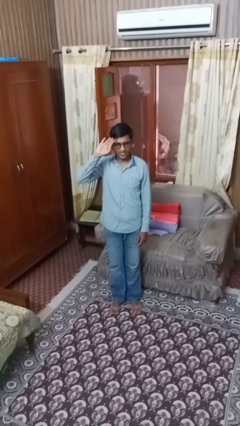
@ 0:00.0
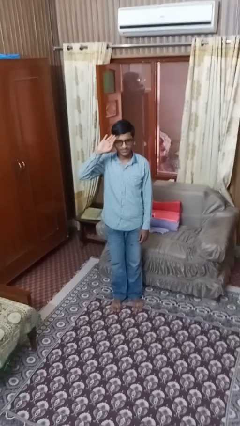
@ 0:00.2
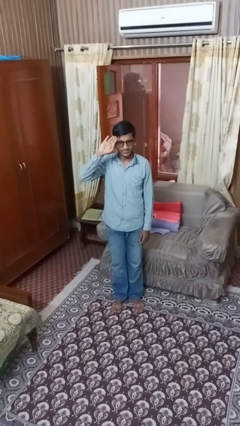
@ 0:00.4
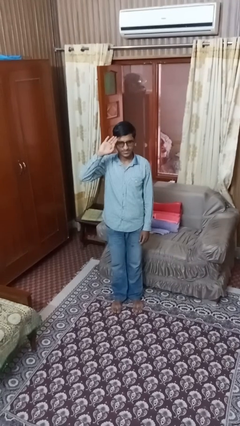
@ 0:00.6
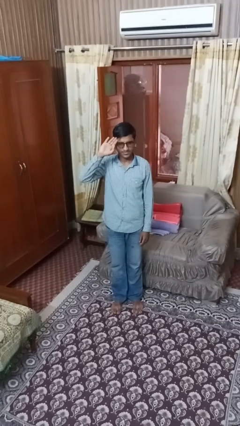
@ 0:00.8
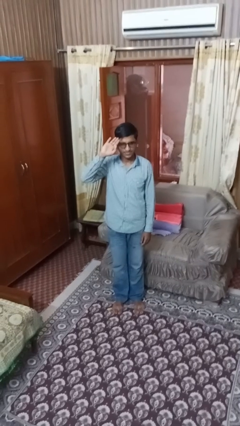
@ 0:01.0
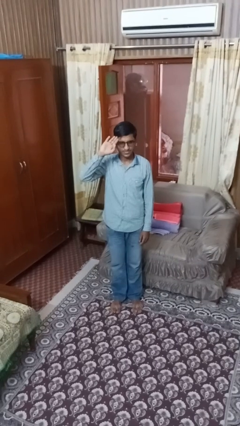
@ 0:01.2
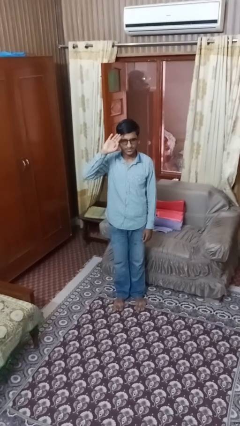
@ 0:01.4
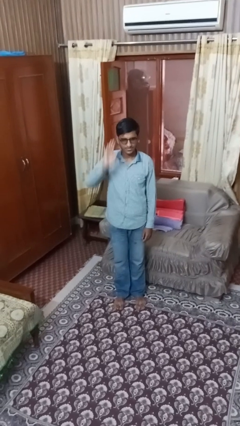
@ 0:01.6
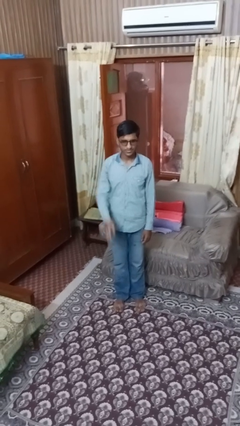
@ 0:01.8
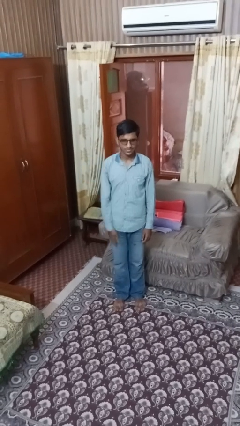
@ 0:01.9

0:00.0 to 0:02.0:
person salutes

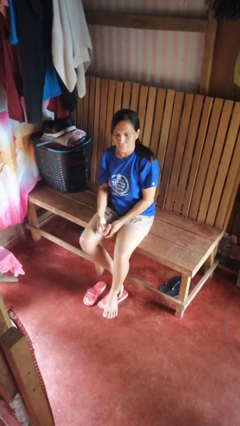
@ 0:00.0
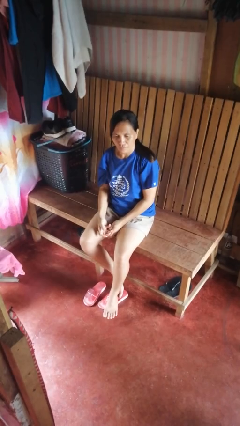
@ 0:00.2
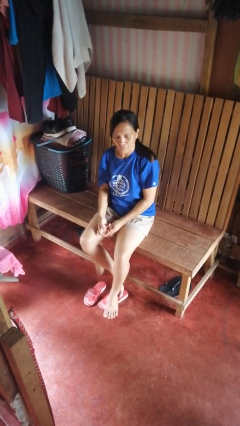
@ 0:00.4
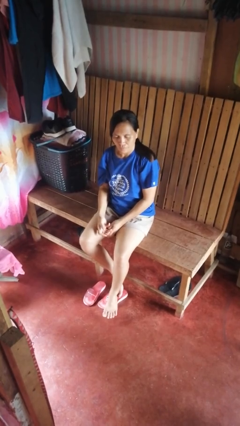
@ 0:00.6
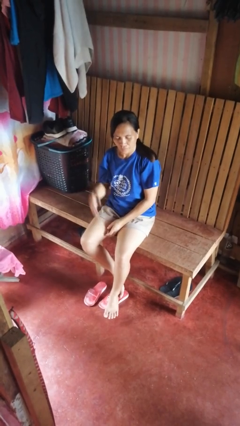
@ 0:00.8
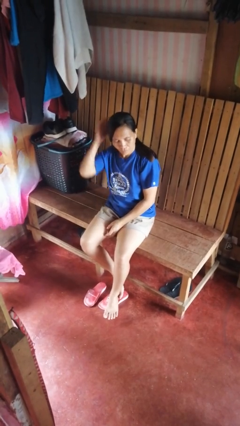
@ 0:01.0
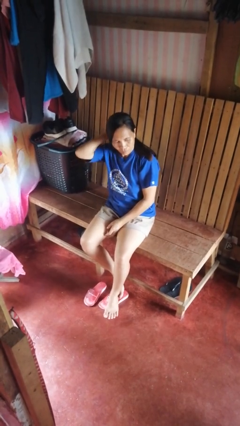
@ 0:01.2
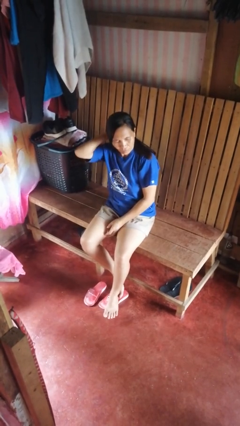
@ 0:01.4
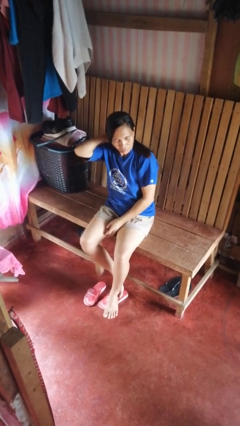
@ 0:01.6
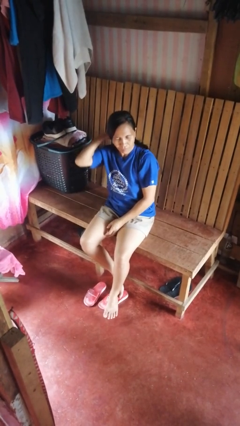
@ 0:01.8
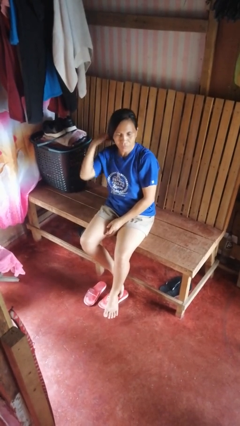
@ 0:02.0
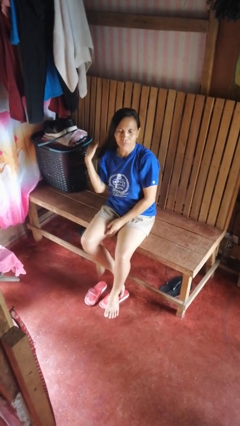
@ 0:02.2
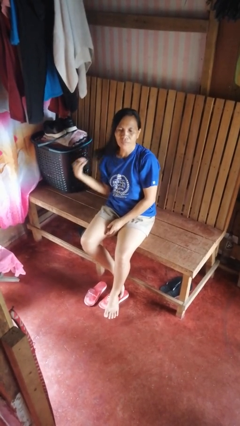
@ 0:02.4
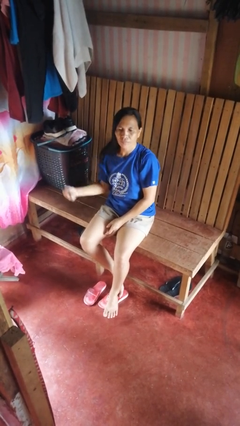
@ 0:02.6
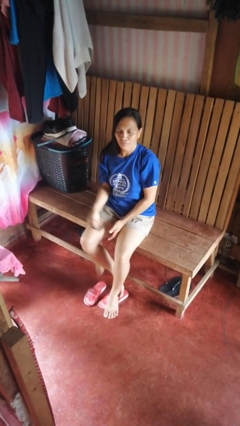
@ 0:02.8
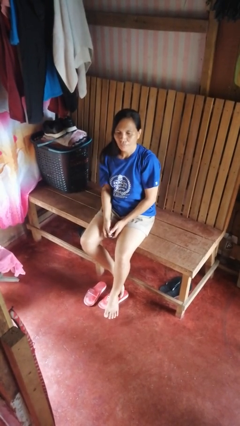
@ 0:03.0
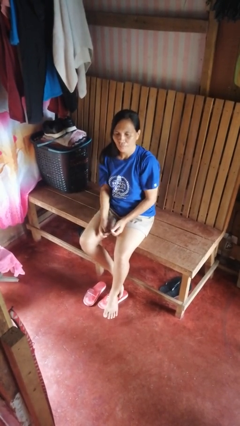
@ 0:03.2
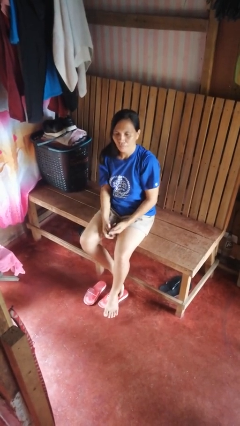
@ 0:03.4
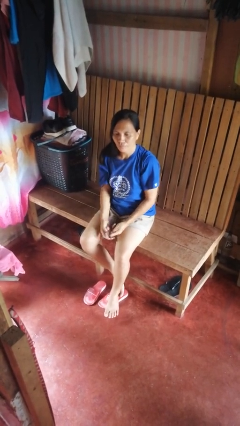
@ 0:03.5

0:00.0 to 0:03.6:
person takes off hairtie

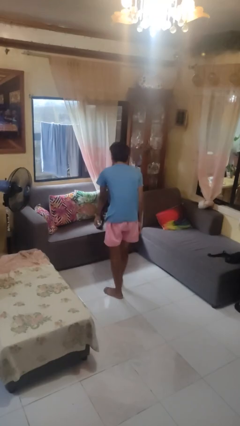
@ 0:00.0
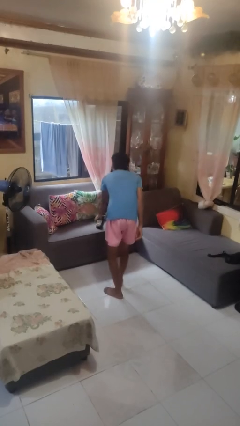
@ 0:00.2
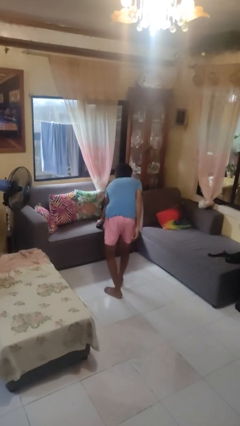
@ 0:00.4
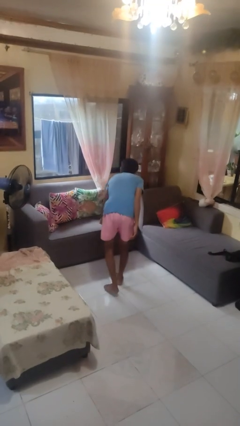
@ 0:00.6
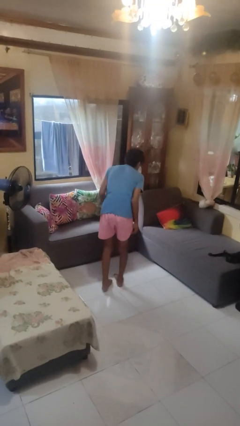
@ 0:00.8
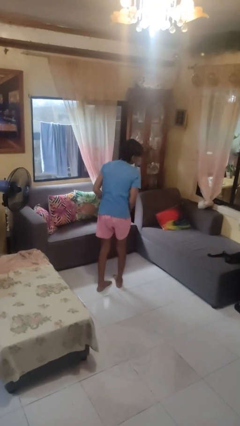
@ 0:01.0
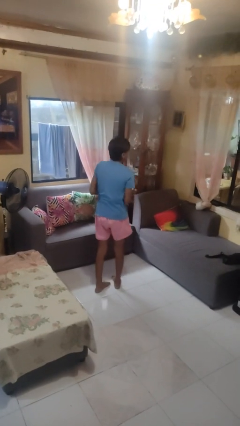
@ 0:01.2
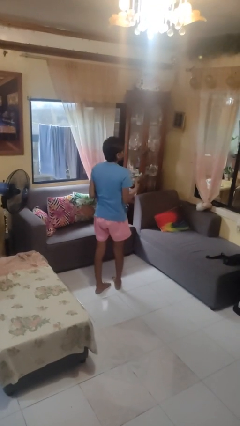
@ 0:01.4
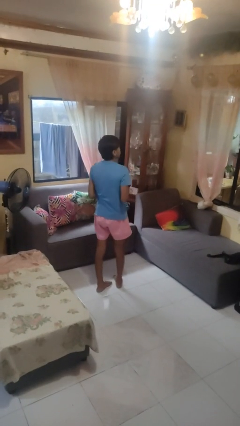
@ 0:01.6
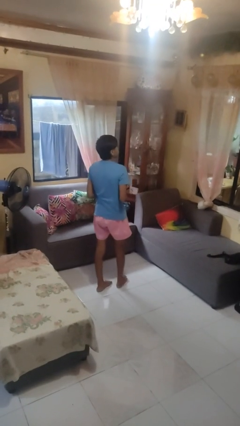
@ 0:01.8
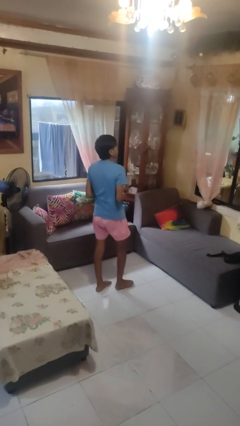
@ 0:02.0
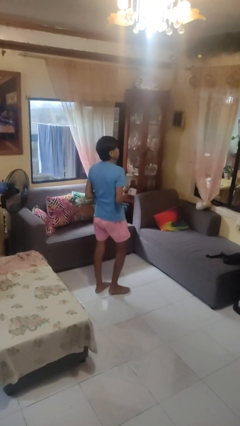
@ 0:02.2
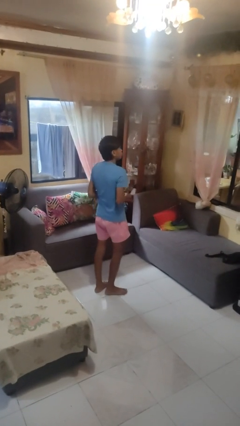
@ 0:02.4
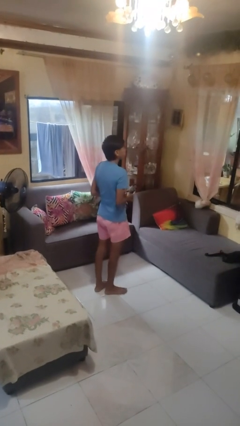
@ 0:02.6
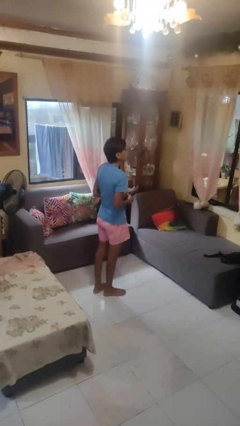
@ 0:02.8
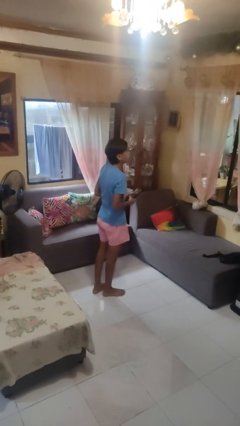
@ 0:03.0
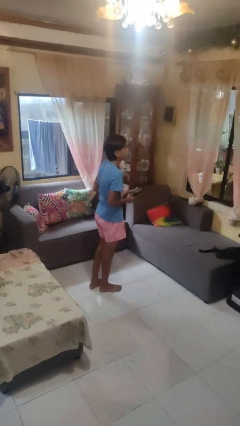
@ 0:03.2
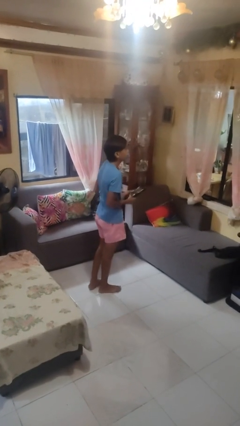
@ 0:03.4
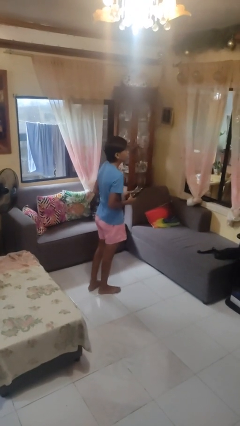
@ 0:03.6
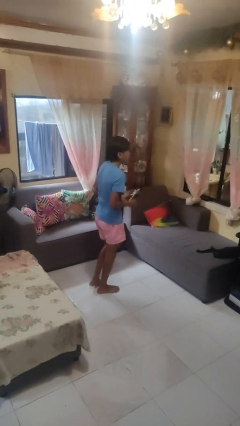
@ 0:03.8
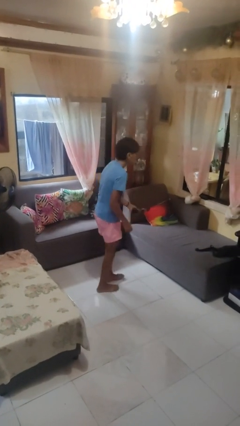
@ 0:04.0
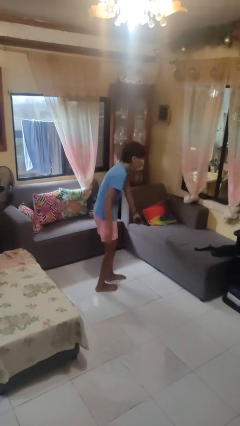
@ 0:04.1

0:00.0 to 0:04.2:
person picks up object from couch

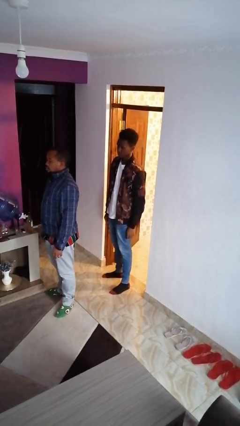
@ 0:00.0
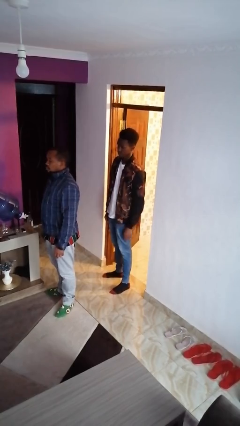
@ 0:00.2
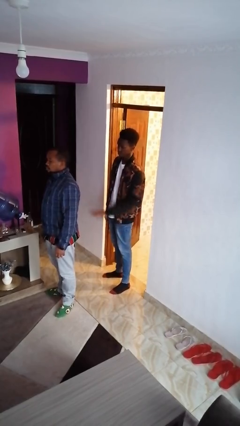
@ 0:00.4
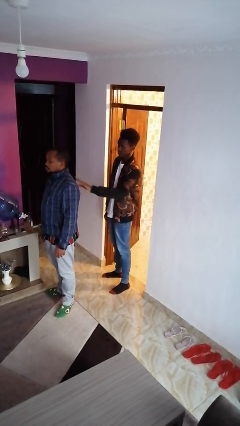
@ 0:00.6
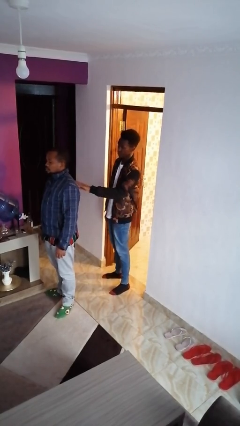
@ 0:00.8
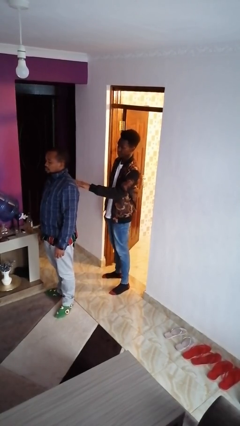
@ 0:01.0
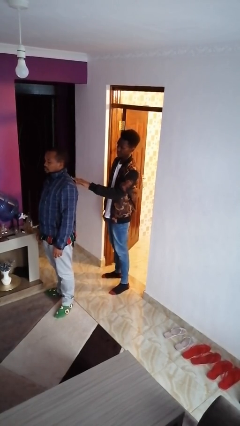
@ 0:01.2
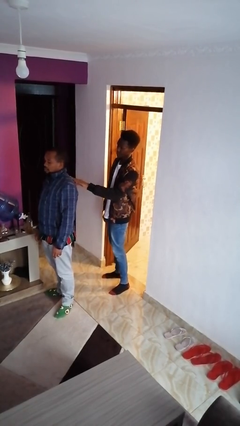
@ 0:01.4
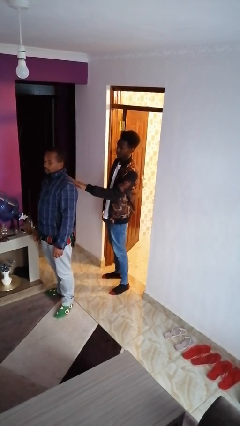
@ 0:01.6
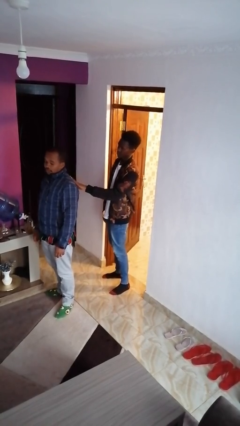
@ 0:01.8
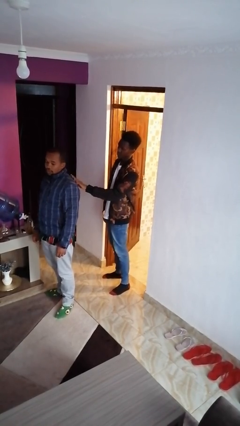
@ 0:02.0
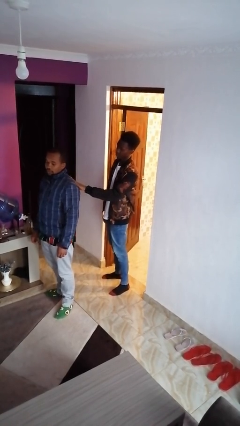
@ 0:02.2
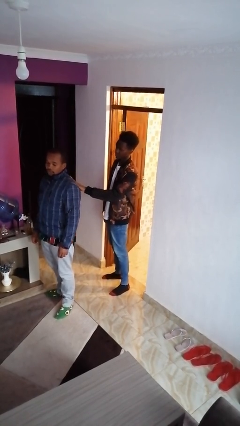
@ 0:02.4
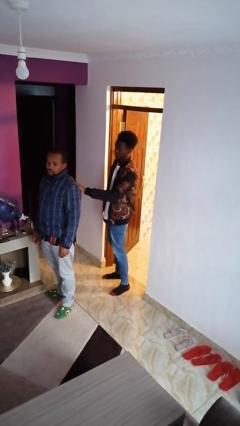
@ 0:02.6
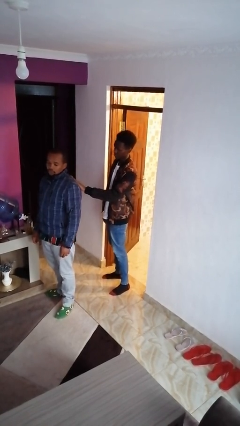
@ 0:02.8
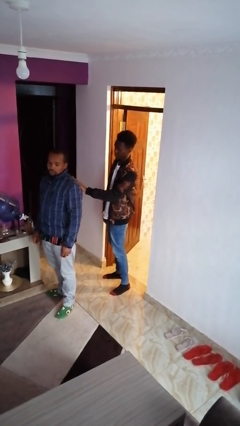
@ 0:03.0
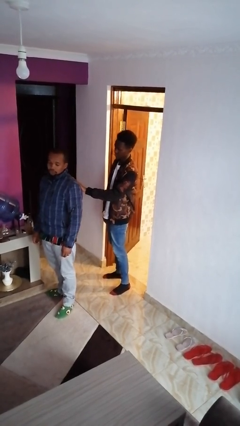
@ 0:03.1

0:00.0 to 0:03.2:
person touches back of person

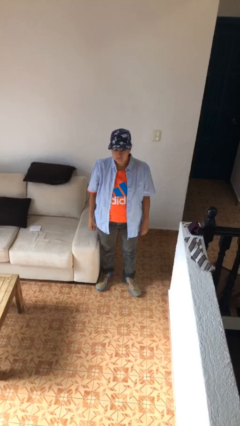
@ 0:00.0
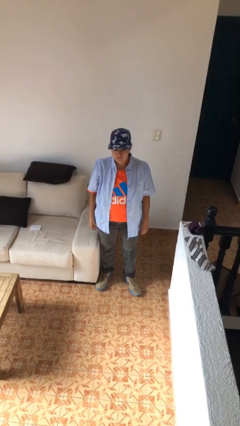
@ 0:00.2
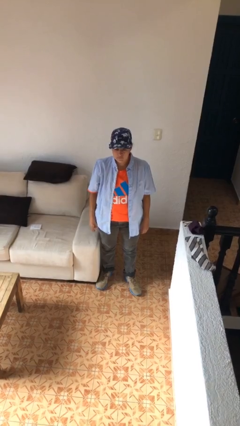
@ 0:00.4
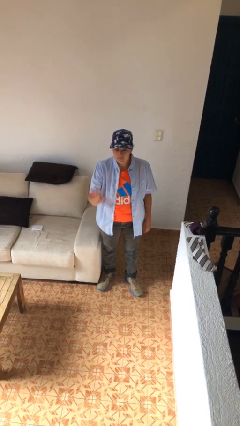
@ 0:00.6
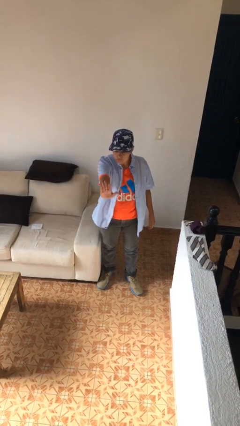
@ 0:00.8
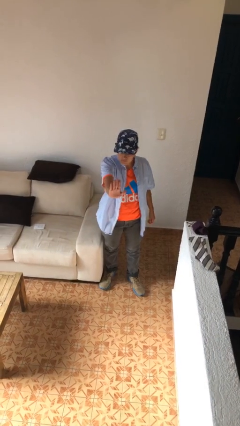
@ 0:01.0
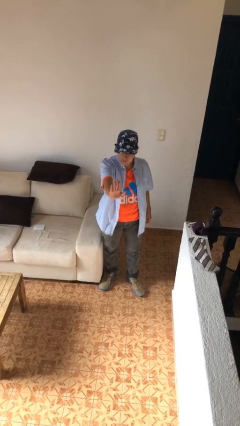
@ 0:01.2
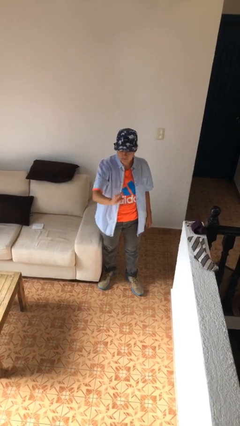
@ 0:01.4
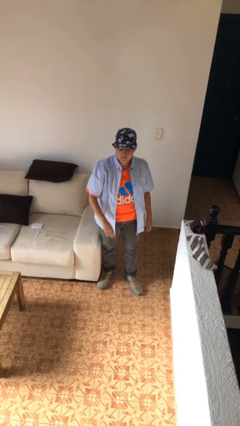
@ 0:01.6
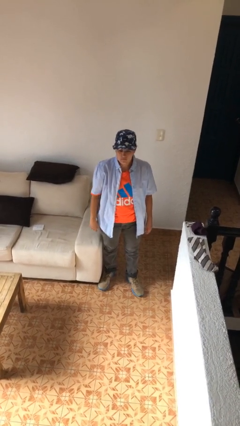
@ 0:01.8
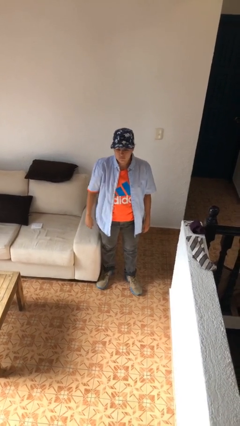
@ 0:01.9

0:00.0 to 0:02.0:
person gestures stop

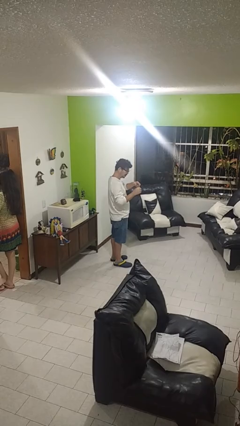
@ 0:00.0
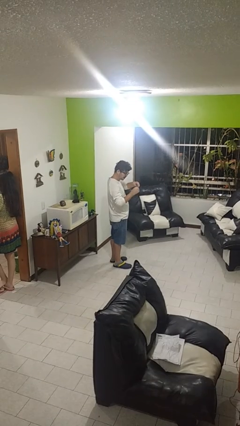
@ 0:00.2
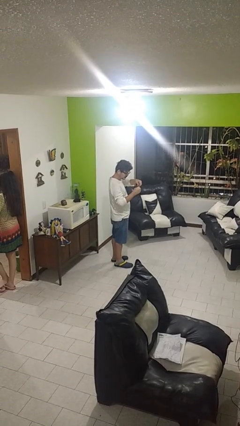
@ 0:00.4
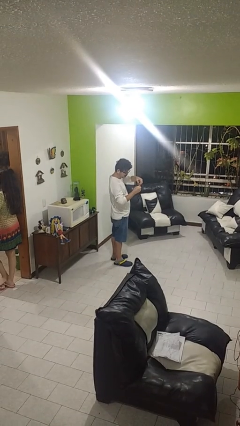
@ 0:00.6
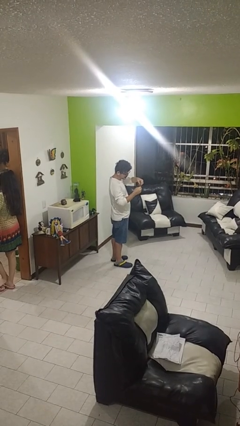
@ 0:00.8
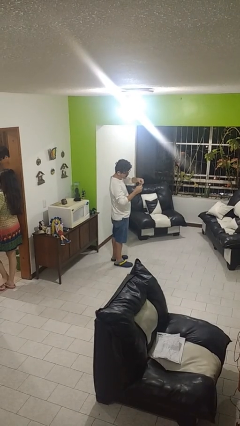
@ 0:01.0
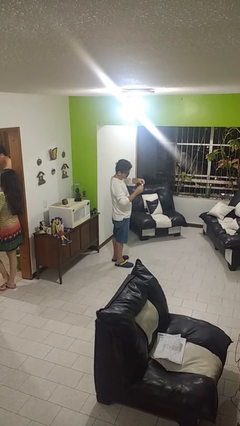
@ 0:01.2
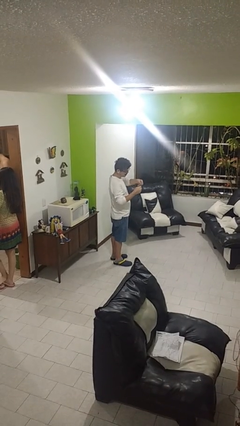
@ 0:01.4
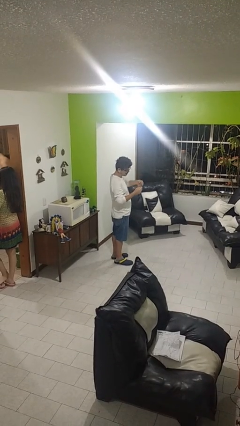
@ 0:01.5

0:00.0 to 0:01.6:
person clips fingernails

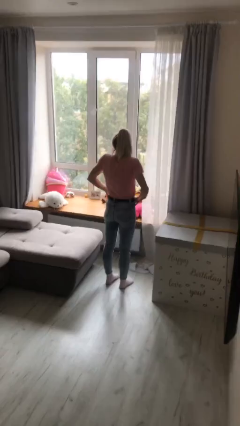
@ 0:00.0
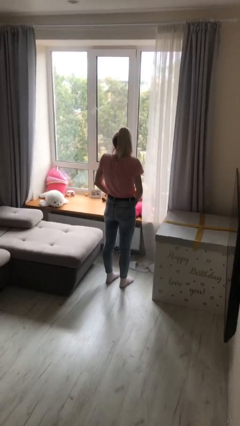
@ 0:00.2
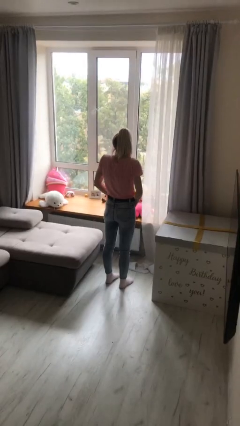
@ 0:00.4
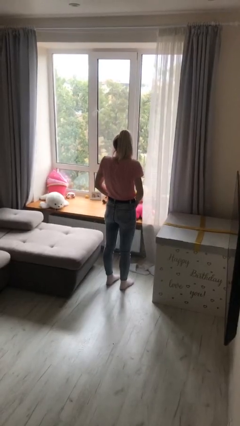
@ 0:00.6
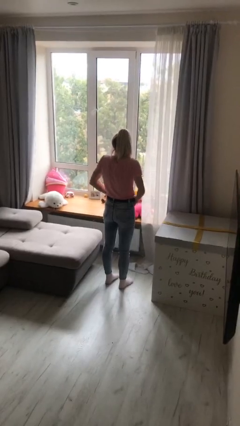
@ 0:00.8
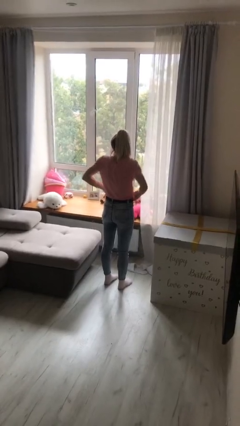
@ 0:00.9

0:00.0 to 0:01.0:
person puts hands in back pockets
